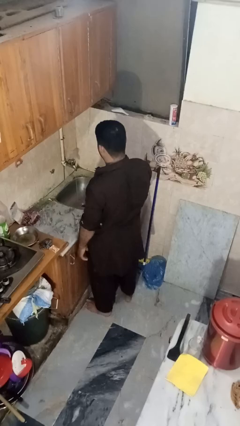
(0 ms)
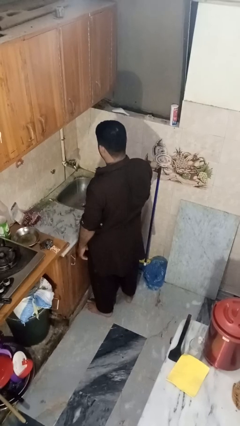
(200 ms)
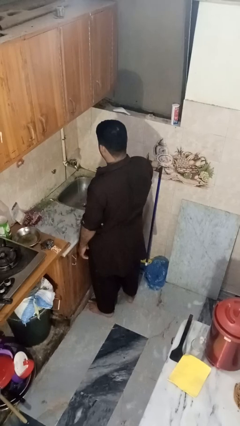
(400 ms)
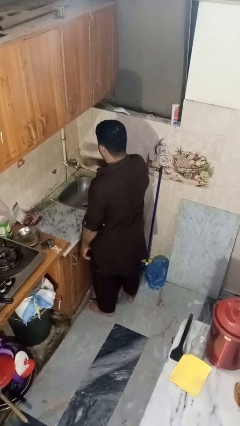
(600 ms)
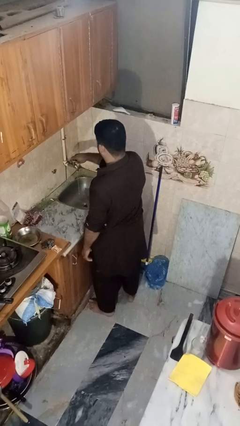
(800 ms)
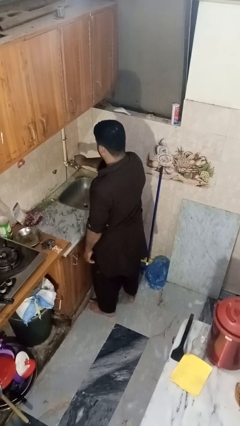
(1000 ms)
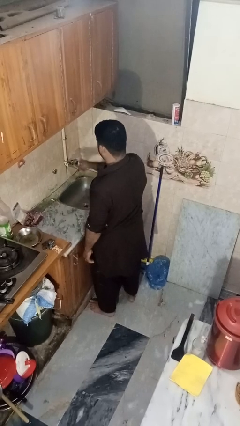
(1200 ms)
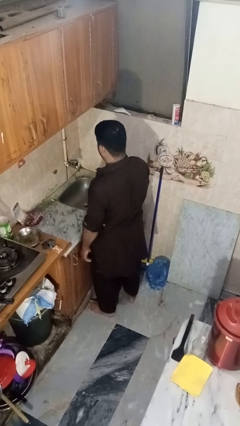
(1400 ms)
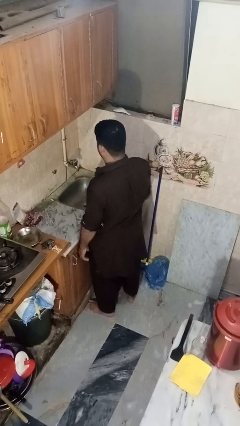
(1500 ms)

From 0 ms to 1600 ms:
person turns off faucet

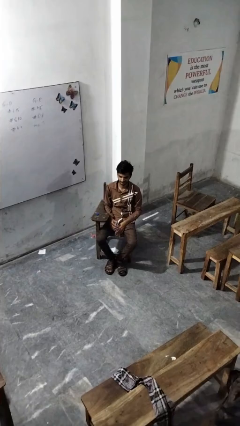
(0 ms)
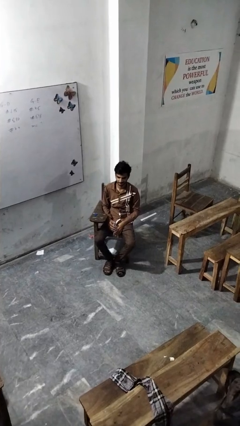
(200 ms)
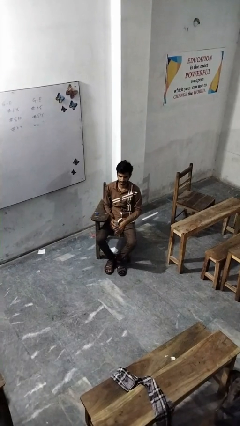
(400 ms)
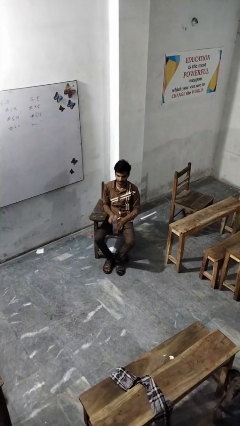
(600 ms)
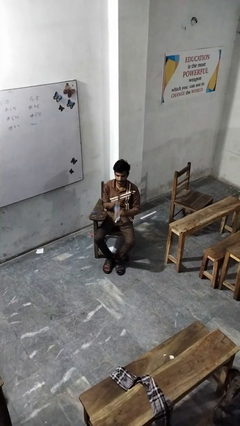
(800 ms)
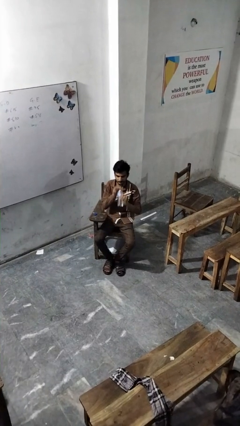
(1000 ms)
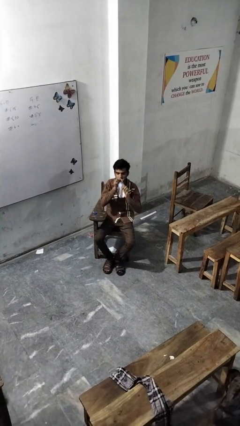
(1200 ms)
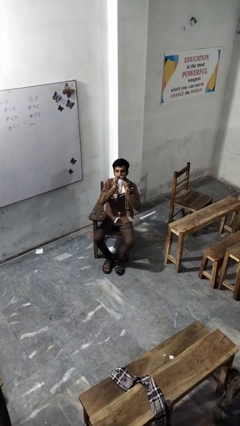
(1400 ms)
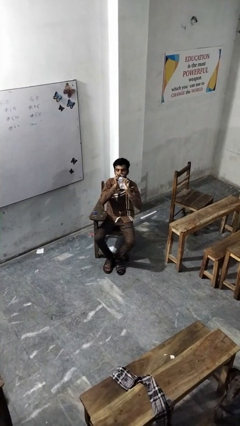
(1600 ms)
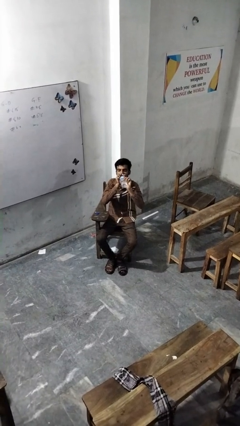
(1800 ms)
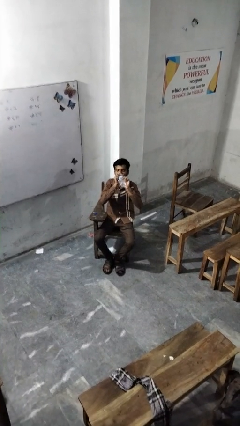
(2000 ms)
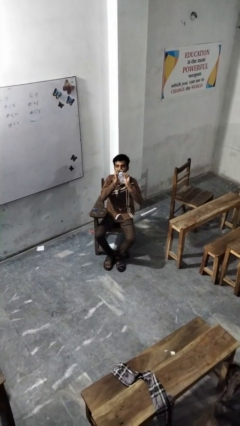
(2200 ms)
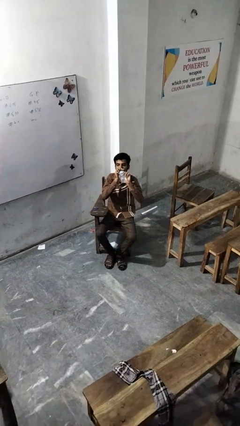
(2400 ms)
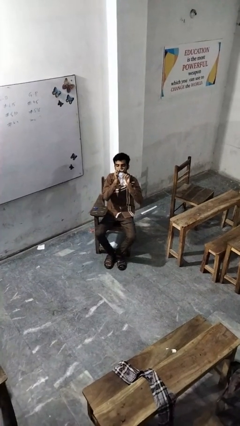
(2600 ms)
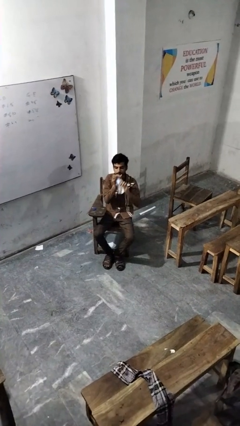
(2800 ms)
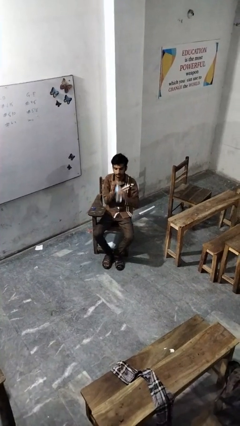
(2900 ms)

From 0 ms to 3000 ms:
person drinks from bottle

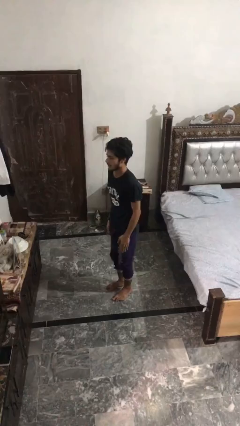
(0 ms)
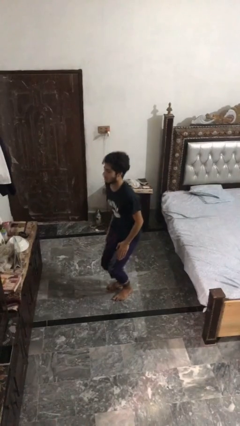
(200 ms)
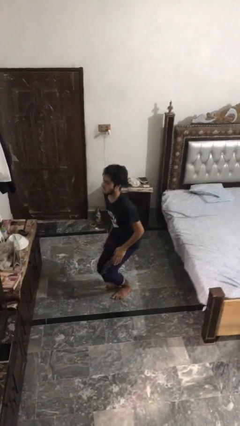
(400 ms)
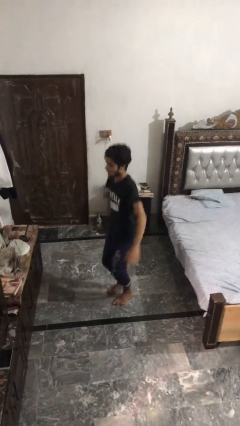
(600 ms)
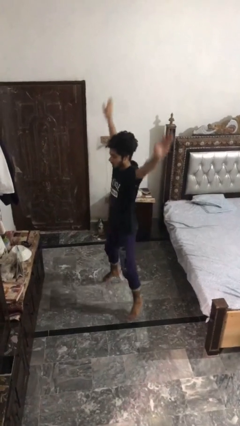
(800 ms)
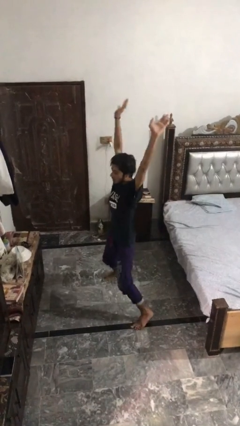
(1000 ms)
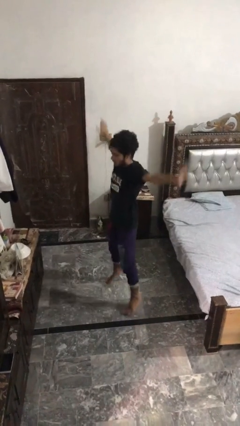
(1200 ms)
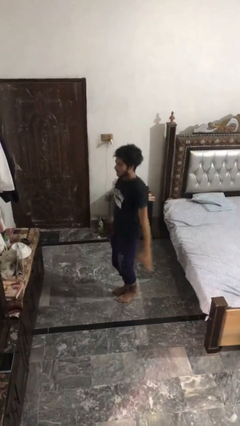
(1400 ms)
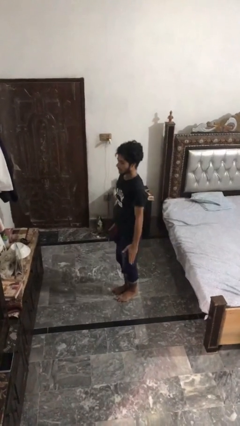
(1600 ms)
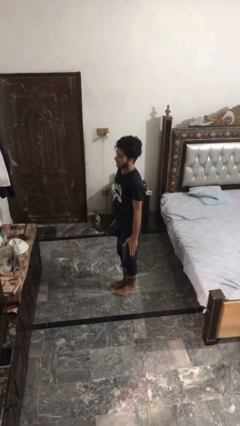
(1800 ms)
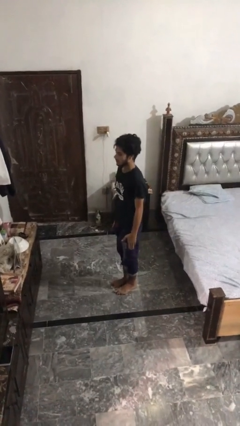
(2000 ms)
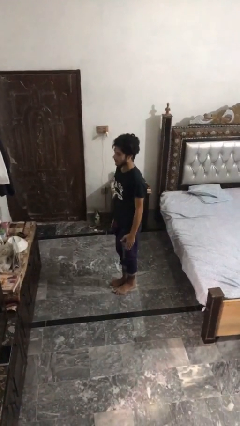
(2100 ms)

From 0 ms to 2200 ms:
person exercises with jumping jacks

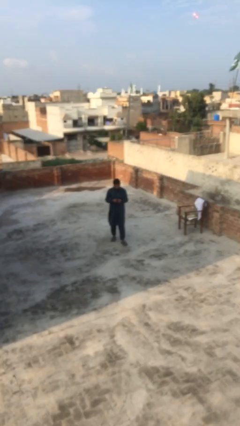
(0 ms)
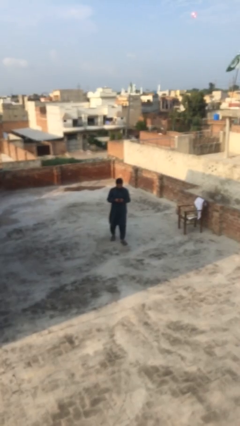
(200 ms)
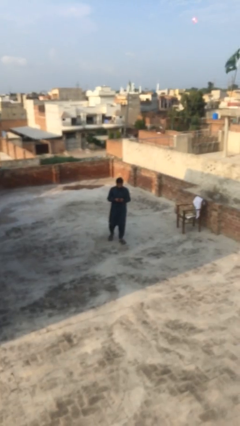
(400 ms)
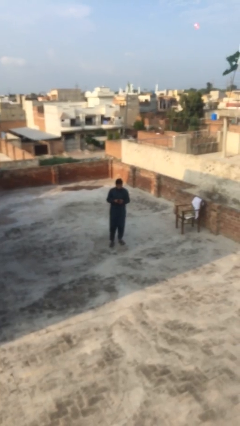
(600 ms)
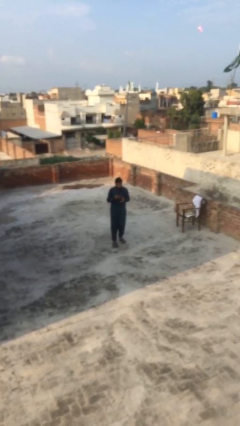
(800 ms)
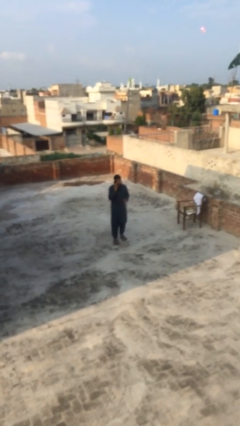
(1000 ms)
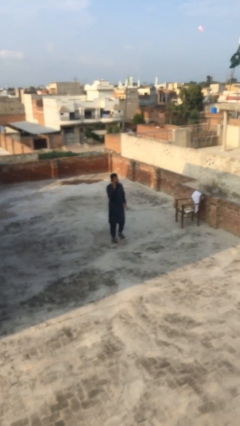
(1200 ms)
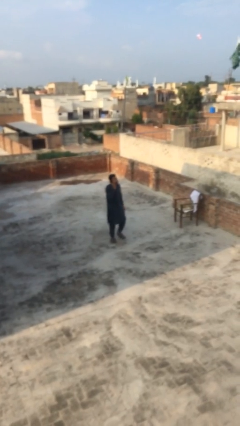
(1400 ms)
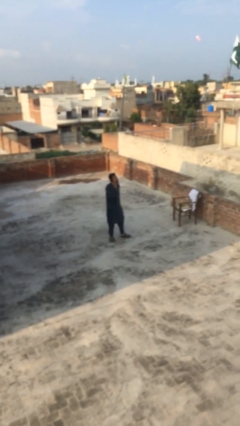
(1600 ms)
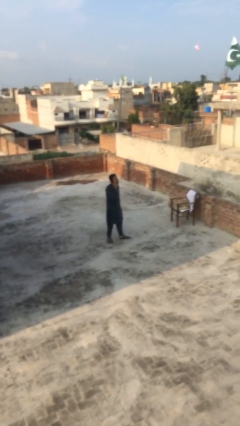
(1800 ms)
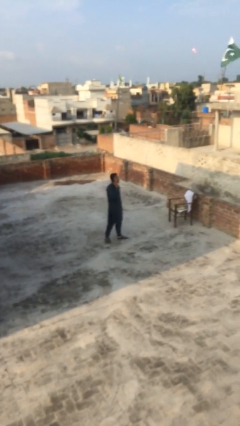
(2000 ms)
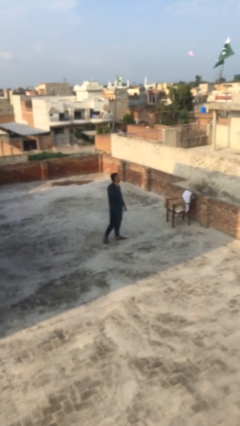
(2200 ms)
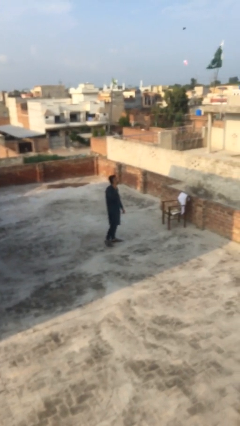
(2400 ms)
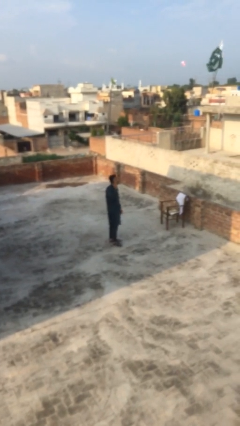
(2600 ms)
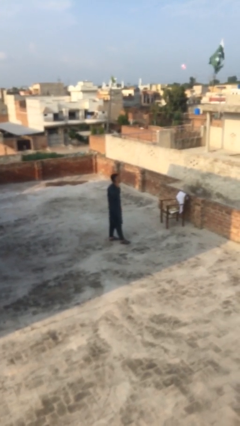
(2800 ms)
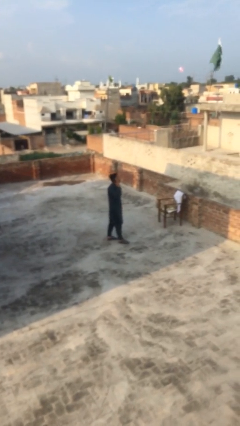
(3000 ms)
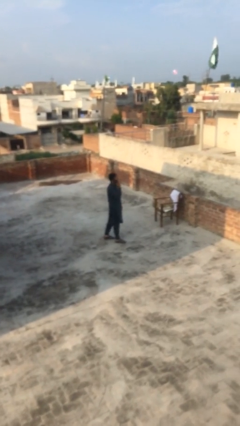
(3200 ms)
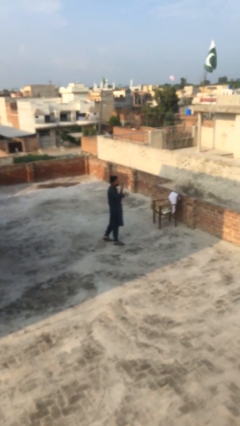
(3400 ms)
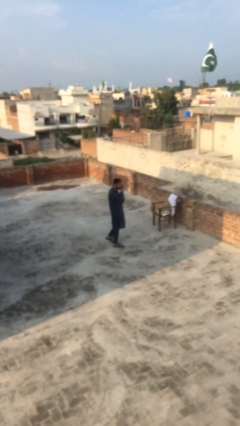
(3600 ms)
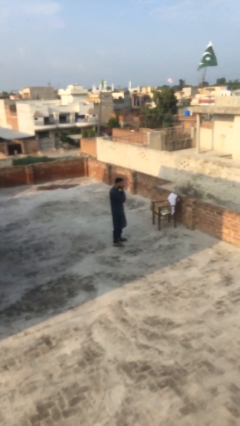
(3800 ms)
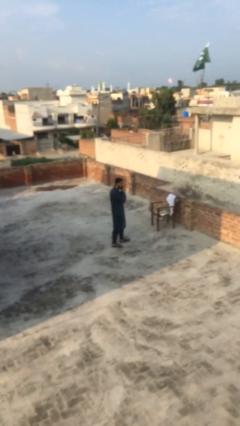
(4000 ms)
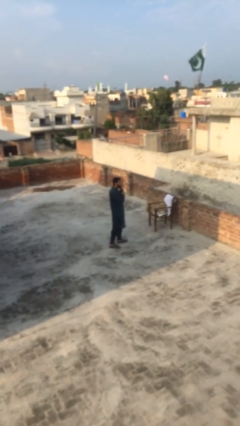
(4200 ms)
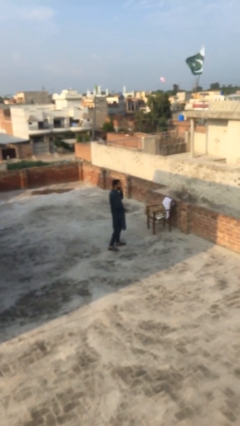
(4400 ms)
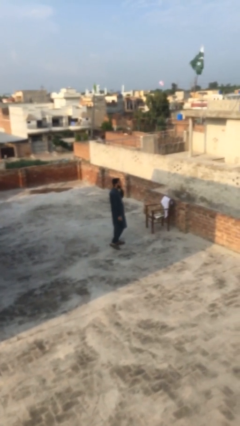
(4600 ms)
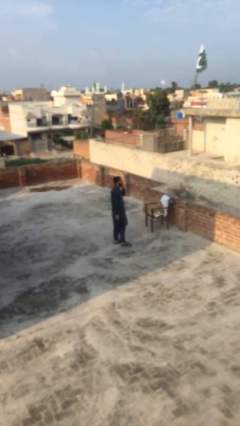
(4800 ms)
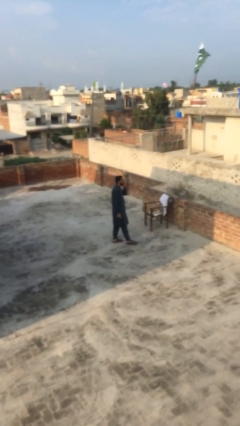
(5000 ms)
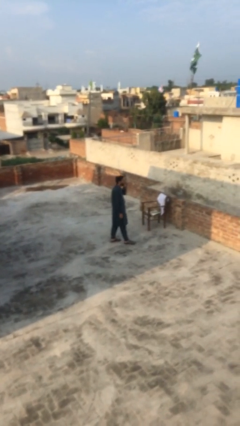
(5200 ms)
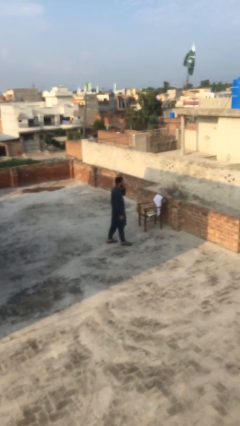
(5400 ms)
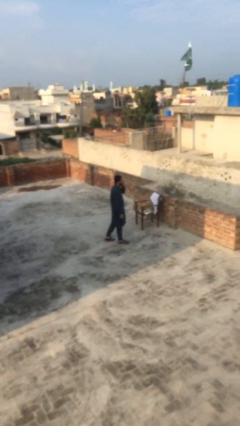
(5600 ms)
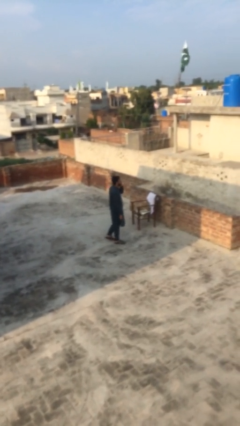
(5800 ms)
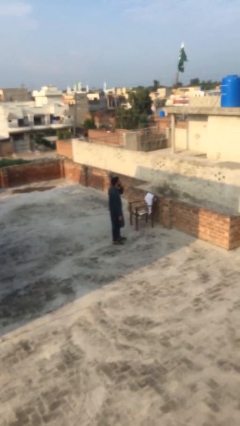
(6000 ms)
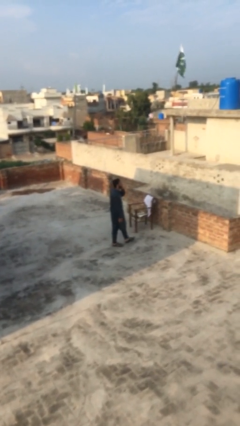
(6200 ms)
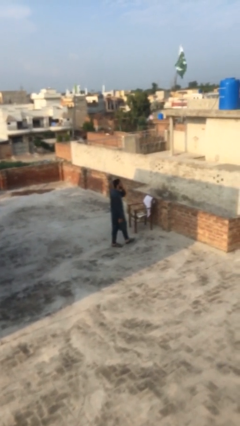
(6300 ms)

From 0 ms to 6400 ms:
person talks on phone

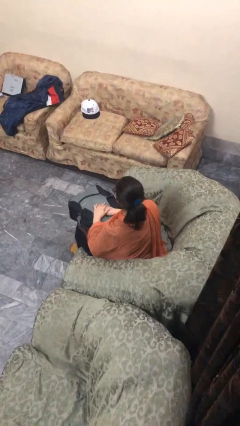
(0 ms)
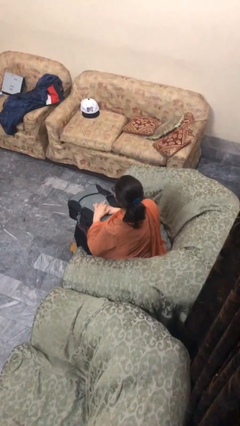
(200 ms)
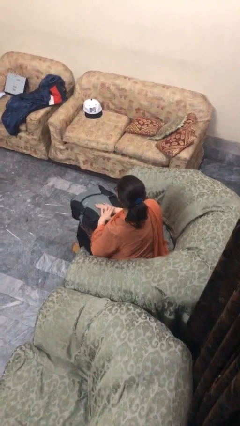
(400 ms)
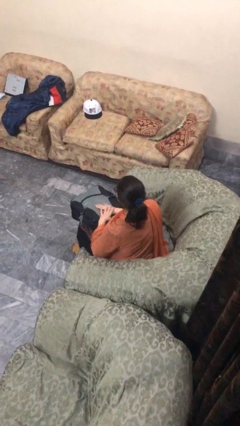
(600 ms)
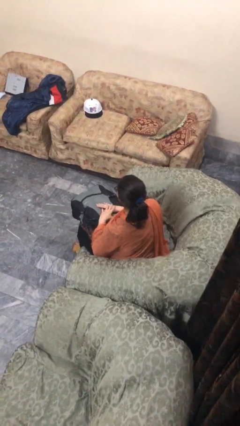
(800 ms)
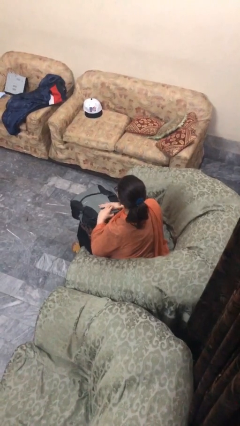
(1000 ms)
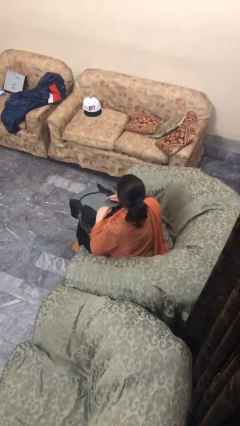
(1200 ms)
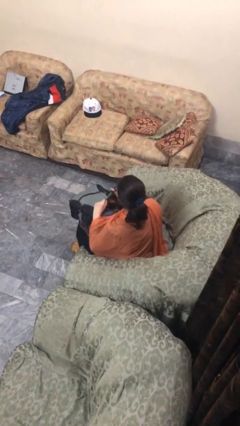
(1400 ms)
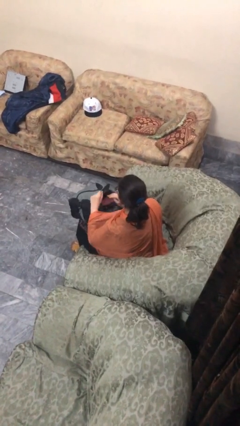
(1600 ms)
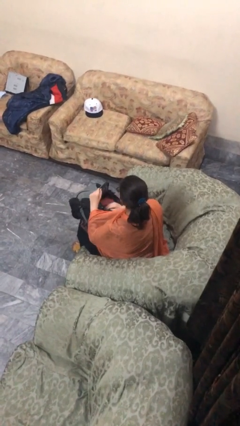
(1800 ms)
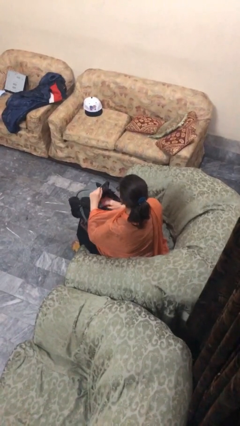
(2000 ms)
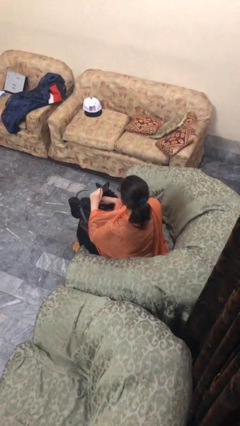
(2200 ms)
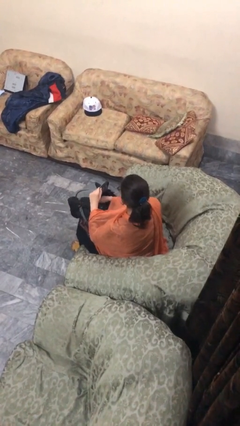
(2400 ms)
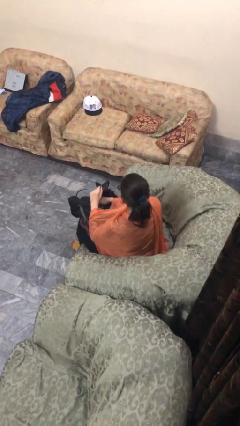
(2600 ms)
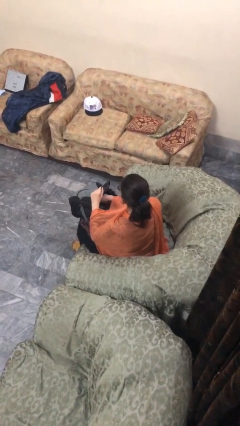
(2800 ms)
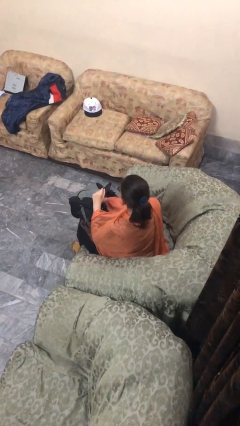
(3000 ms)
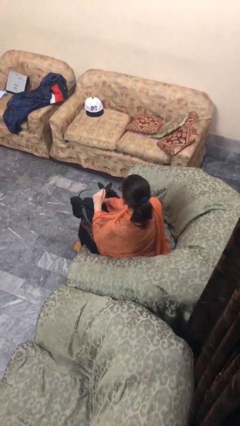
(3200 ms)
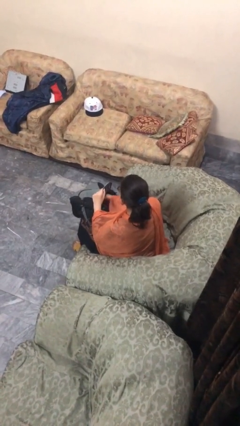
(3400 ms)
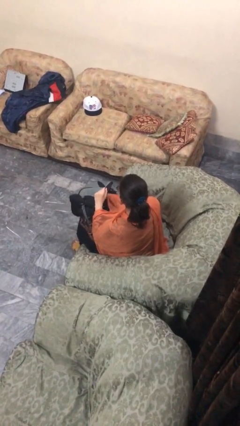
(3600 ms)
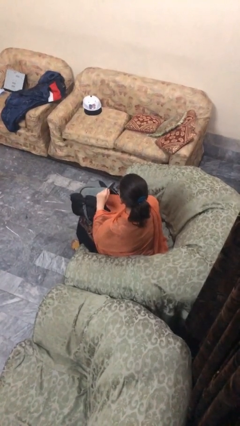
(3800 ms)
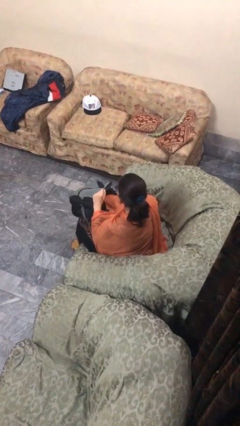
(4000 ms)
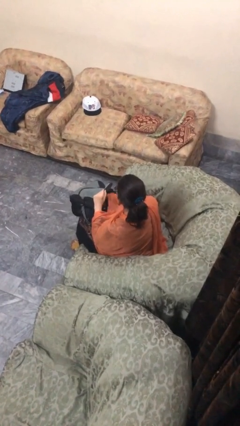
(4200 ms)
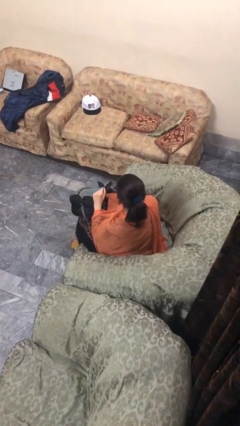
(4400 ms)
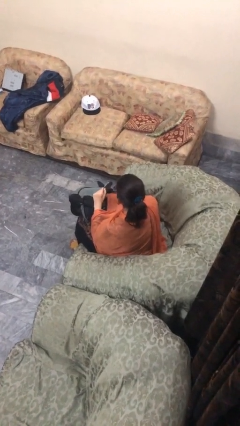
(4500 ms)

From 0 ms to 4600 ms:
person searches in backpack
